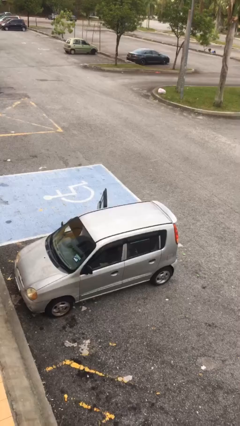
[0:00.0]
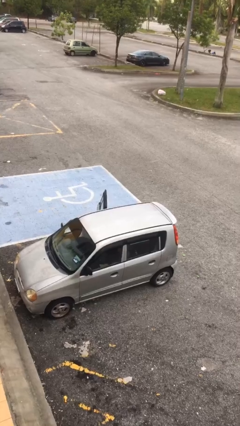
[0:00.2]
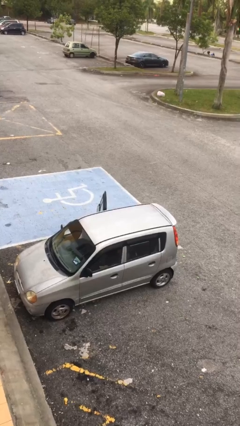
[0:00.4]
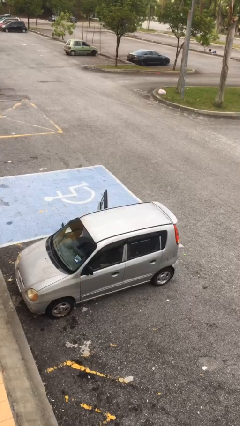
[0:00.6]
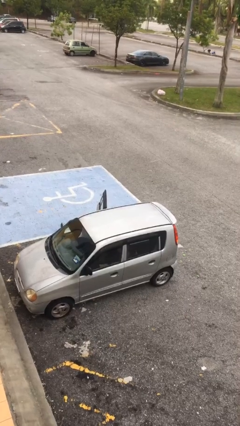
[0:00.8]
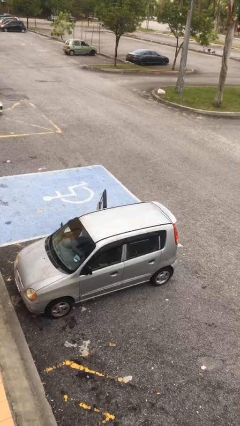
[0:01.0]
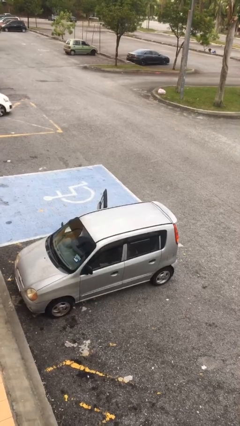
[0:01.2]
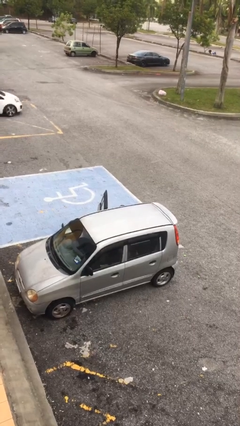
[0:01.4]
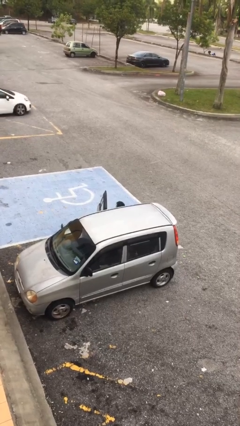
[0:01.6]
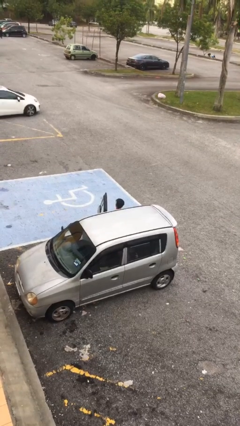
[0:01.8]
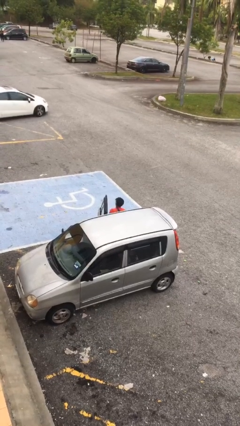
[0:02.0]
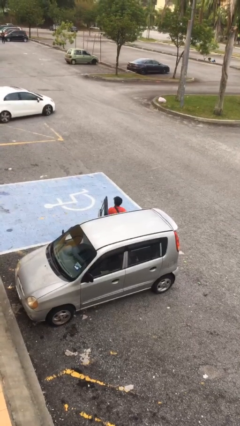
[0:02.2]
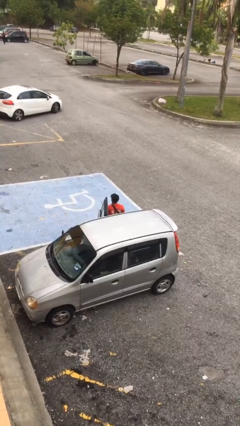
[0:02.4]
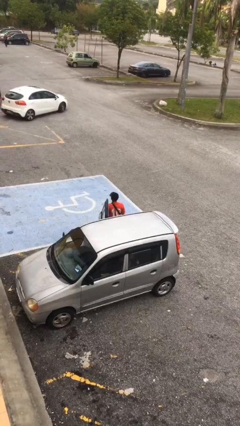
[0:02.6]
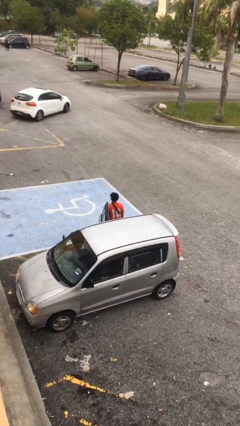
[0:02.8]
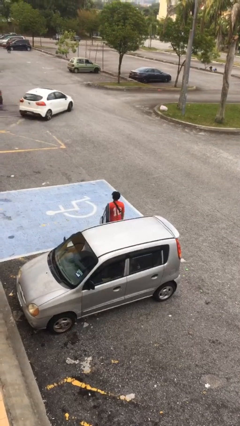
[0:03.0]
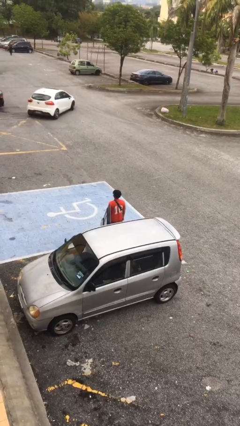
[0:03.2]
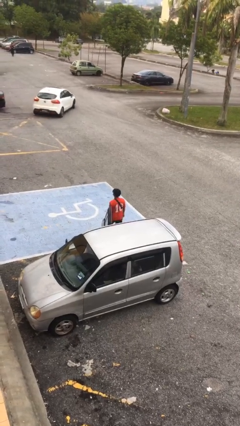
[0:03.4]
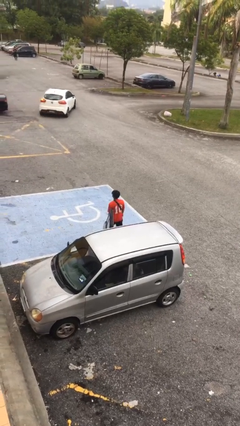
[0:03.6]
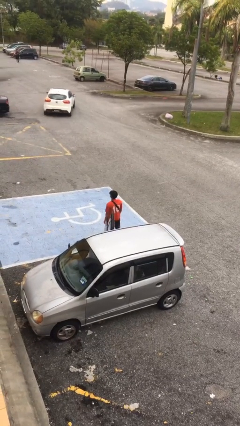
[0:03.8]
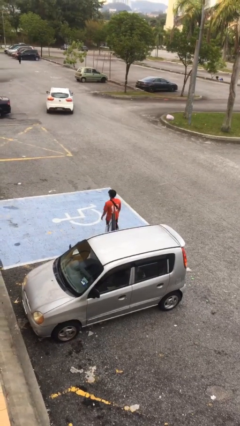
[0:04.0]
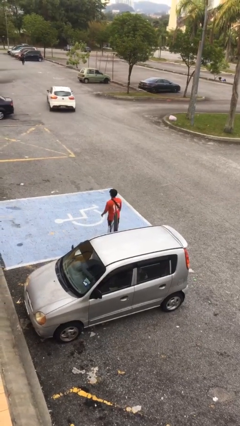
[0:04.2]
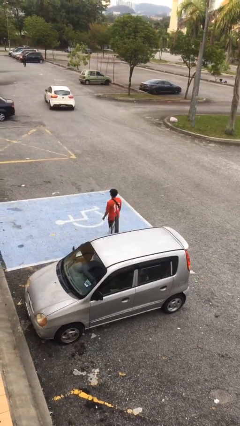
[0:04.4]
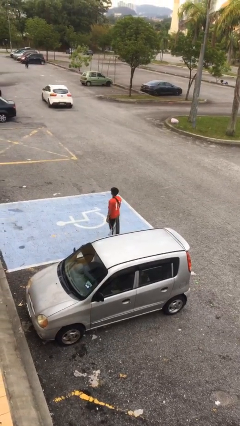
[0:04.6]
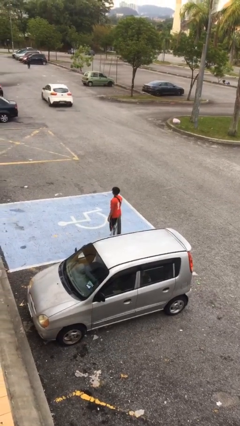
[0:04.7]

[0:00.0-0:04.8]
person exits car

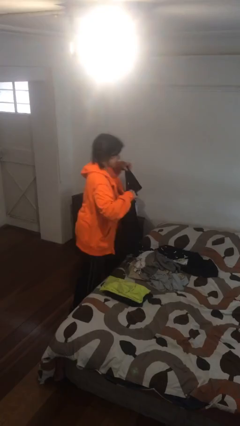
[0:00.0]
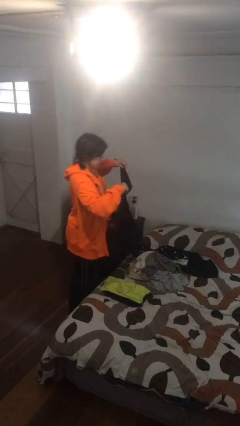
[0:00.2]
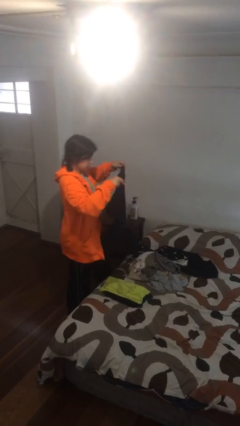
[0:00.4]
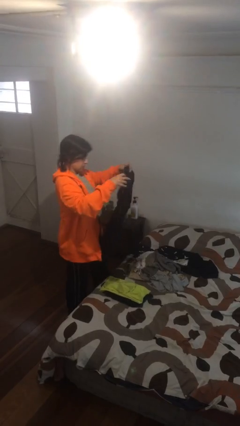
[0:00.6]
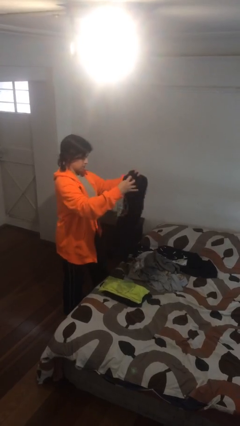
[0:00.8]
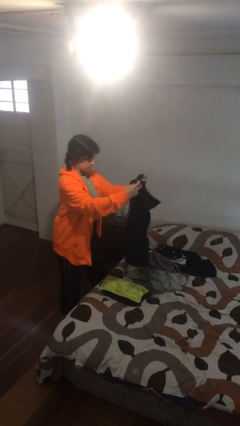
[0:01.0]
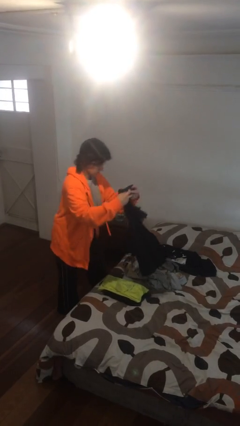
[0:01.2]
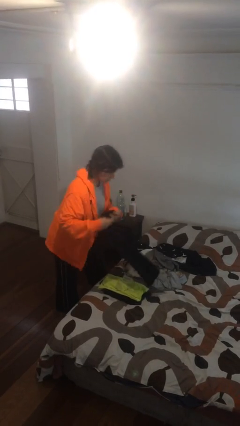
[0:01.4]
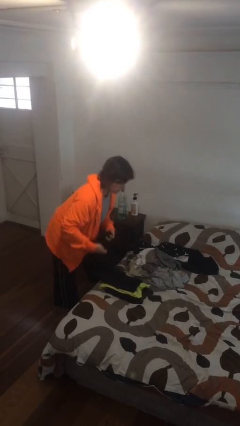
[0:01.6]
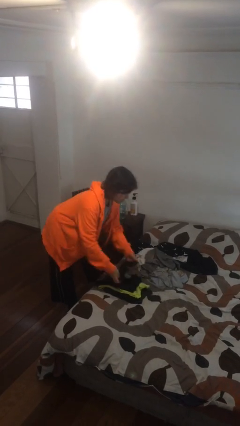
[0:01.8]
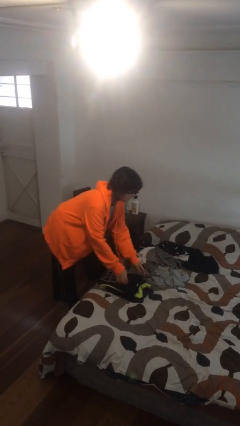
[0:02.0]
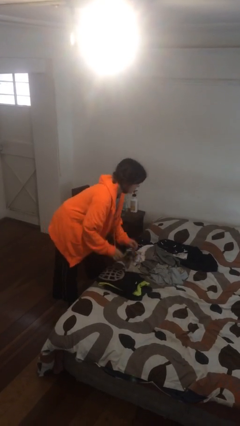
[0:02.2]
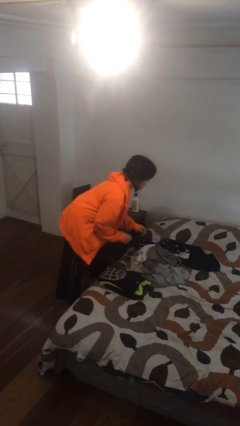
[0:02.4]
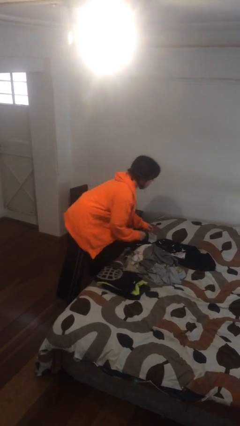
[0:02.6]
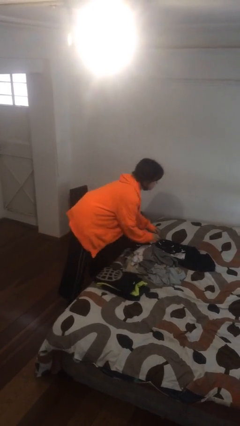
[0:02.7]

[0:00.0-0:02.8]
person folds shirt

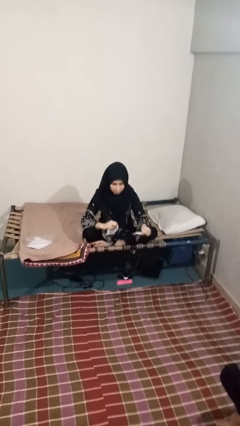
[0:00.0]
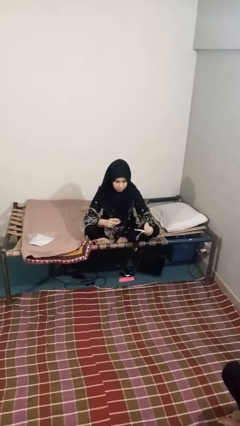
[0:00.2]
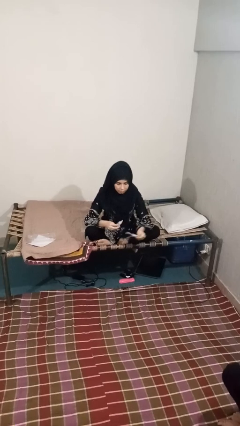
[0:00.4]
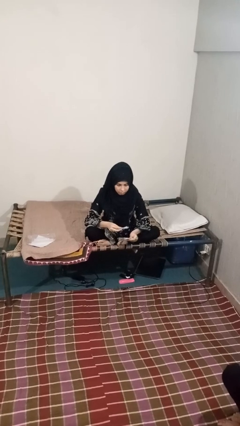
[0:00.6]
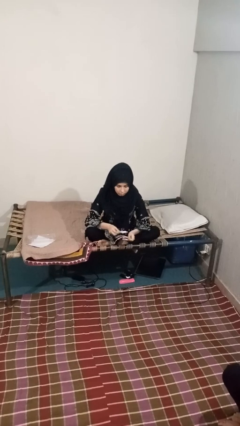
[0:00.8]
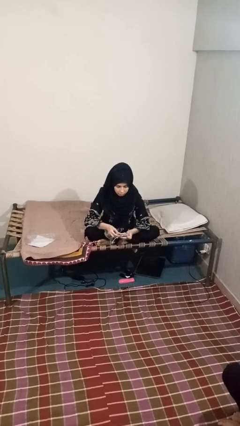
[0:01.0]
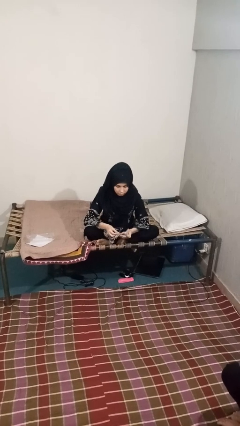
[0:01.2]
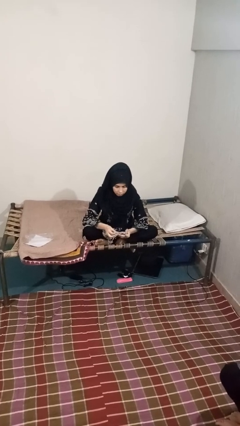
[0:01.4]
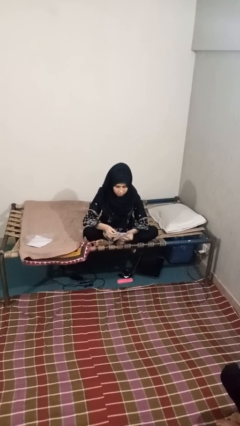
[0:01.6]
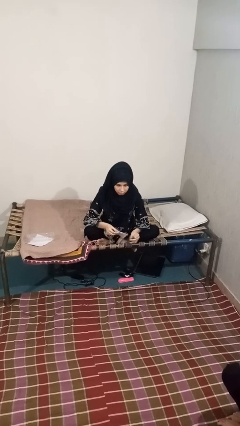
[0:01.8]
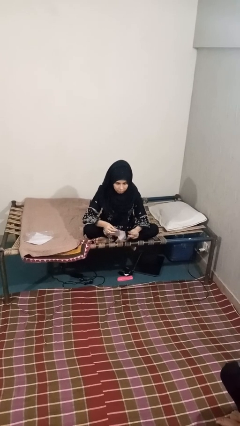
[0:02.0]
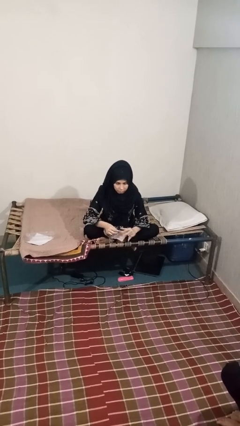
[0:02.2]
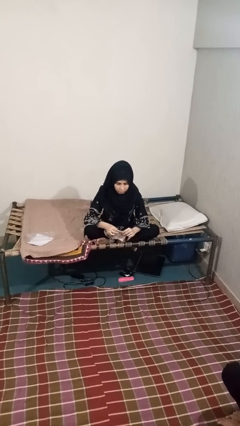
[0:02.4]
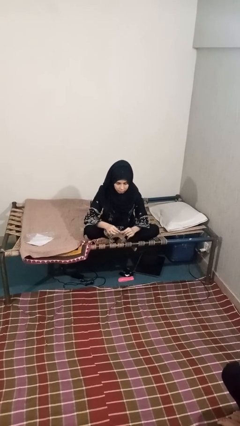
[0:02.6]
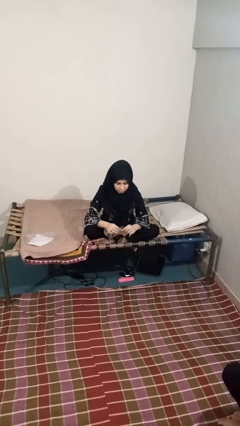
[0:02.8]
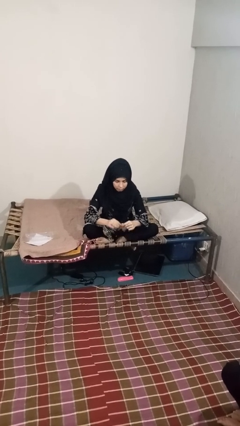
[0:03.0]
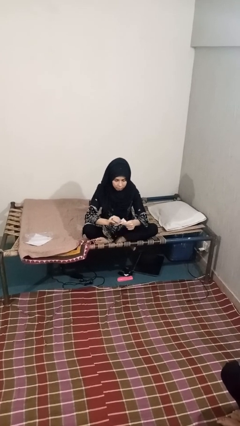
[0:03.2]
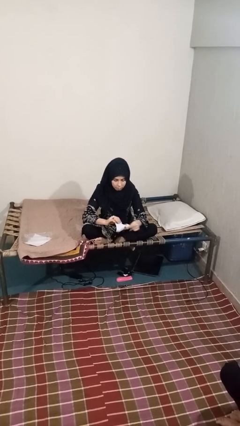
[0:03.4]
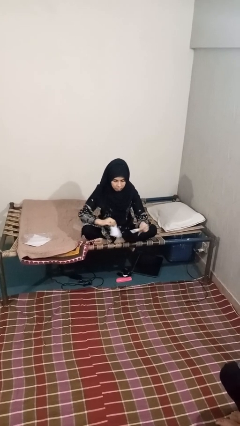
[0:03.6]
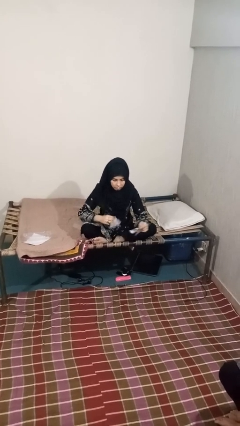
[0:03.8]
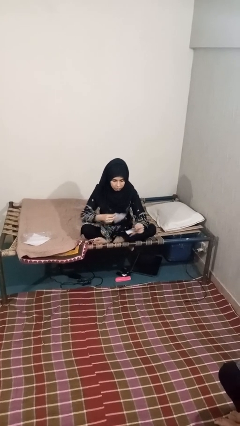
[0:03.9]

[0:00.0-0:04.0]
person tears paper

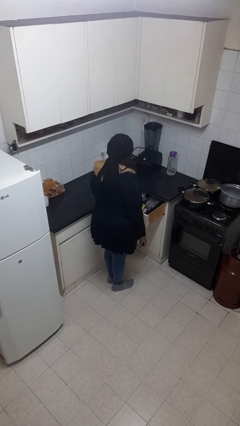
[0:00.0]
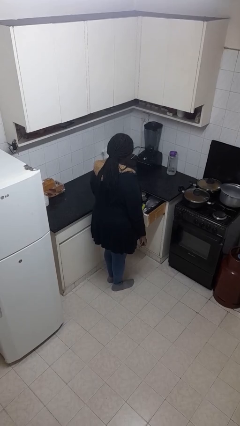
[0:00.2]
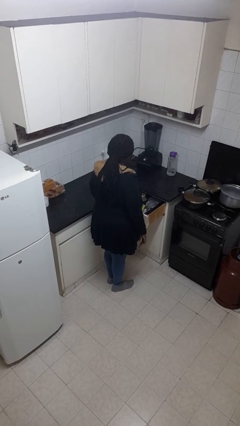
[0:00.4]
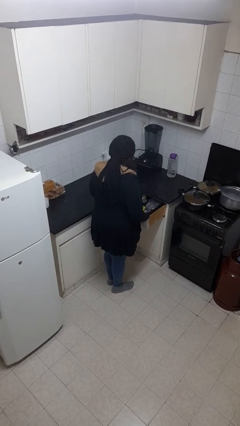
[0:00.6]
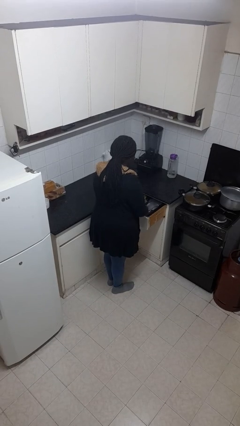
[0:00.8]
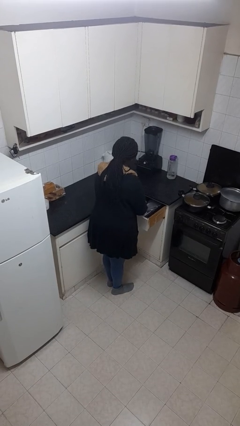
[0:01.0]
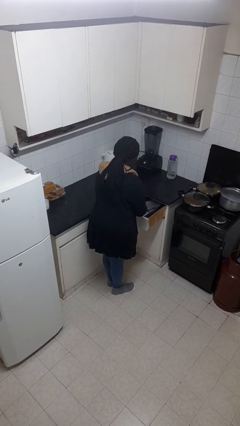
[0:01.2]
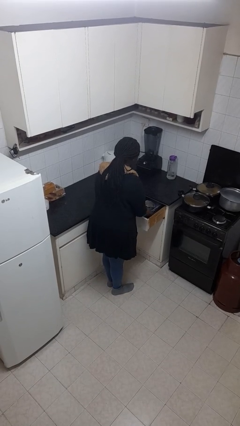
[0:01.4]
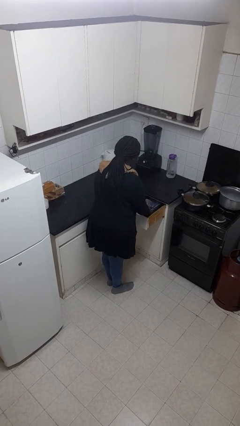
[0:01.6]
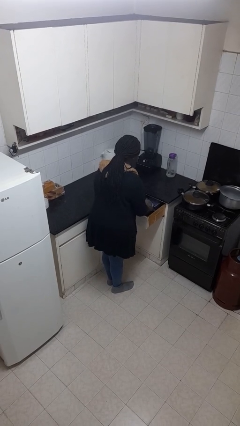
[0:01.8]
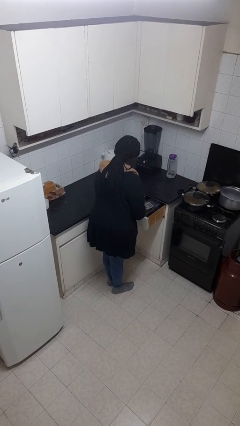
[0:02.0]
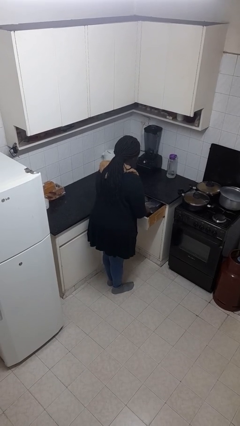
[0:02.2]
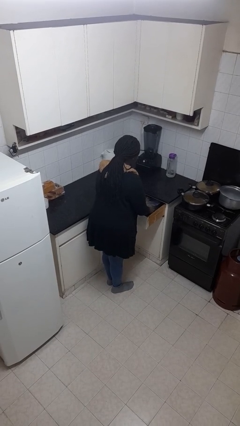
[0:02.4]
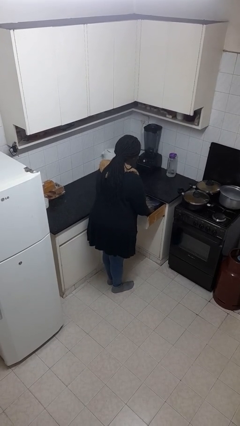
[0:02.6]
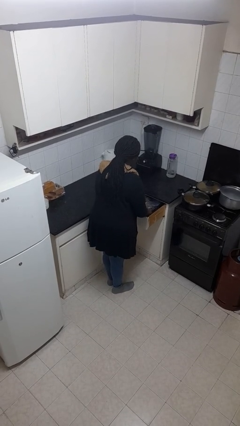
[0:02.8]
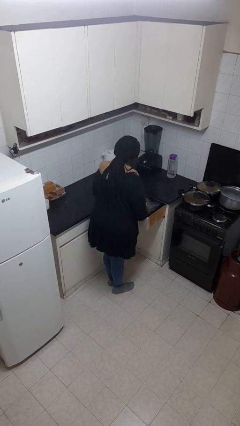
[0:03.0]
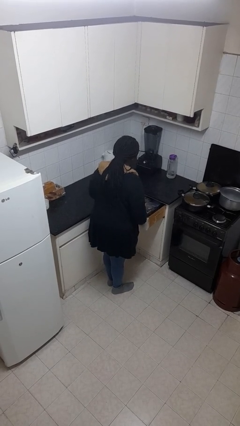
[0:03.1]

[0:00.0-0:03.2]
person searches in kitchen drawer

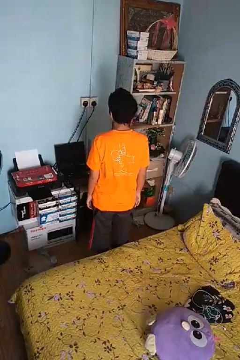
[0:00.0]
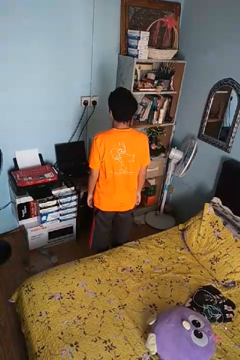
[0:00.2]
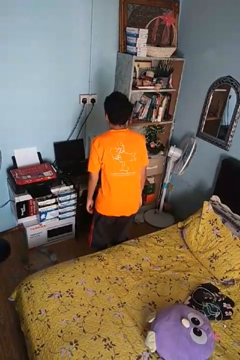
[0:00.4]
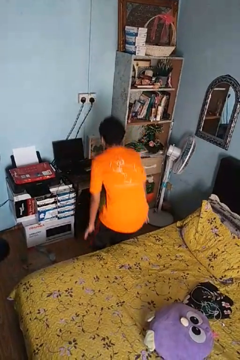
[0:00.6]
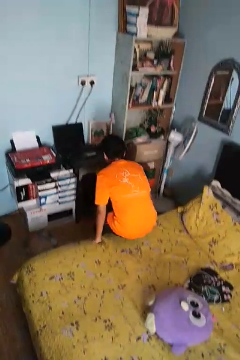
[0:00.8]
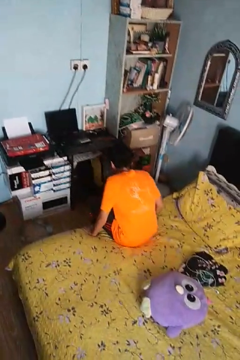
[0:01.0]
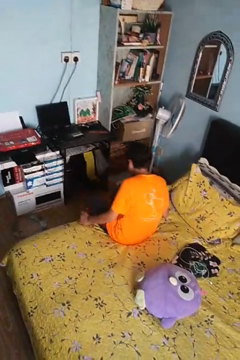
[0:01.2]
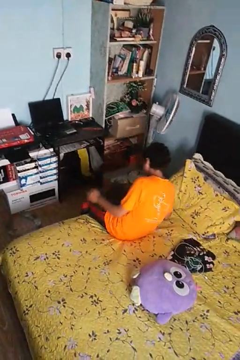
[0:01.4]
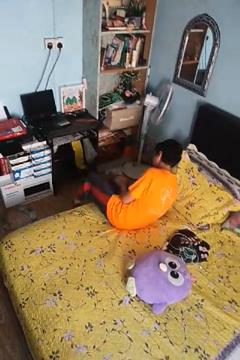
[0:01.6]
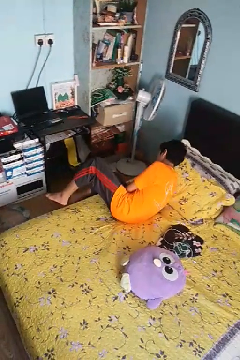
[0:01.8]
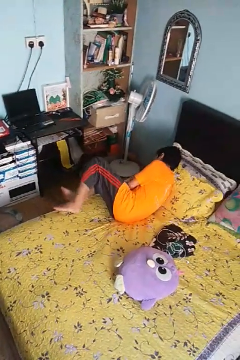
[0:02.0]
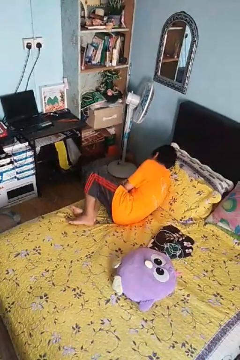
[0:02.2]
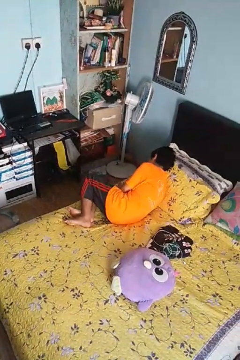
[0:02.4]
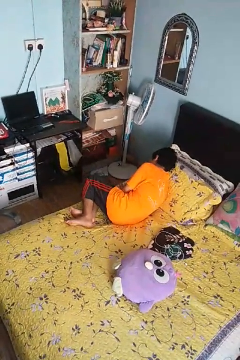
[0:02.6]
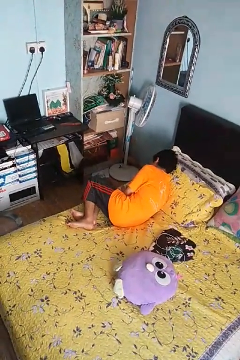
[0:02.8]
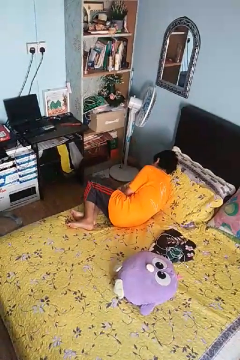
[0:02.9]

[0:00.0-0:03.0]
person lies down on bed
